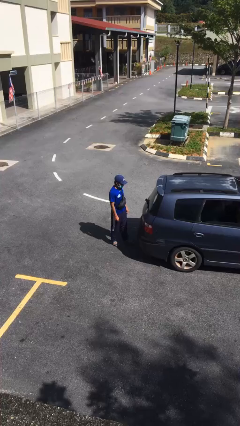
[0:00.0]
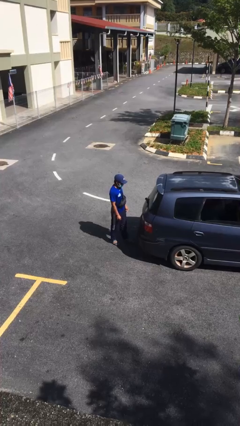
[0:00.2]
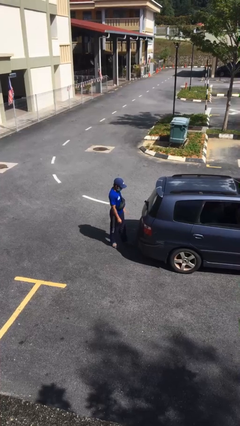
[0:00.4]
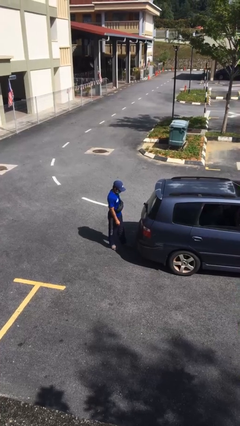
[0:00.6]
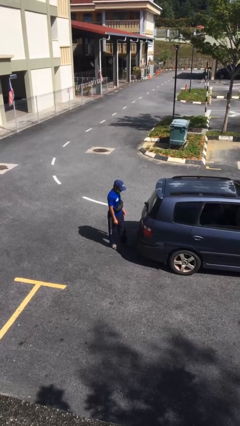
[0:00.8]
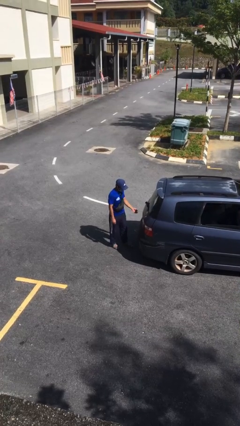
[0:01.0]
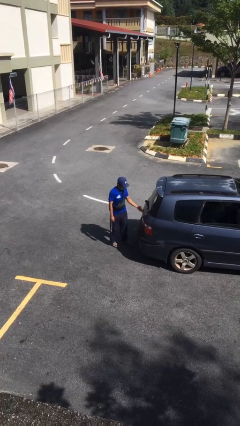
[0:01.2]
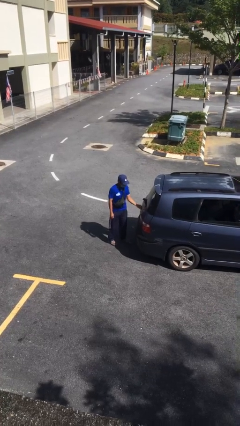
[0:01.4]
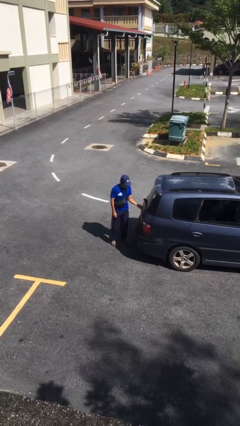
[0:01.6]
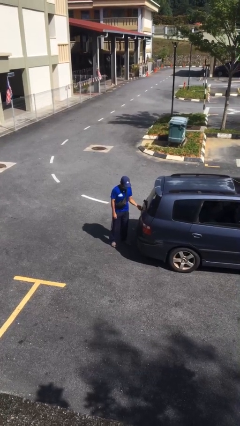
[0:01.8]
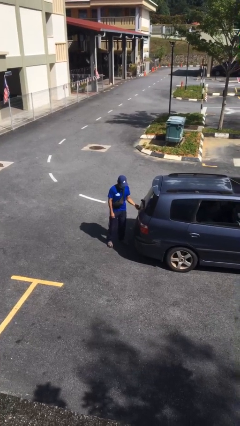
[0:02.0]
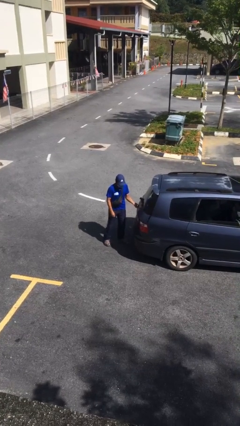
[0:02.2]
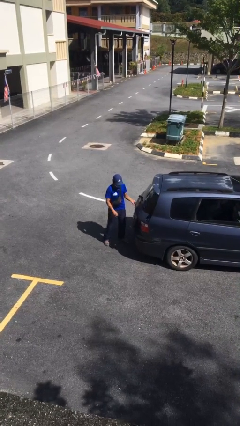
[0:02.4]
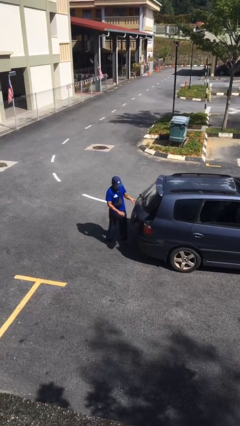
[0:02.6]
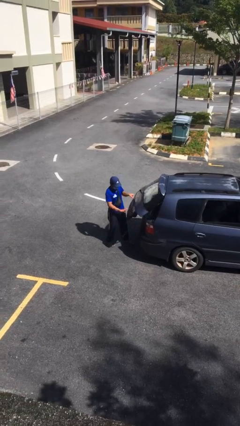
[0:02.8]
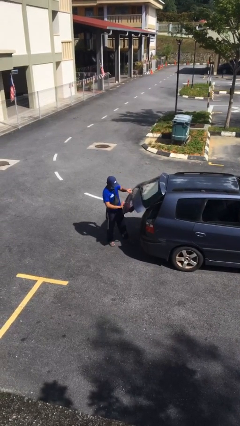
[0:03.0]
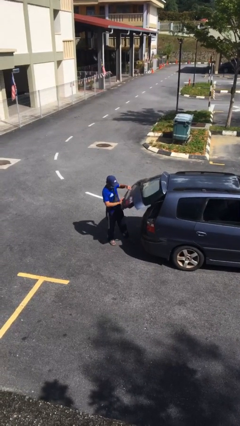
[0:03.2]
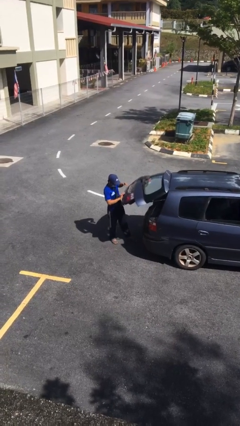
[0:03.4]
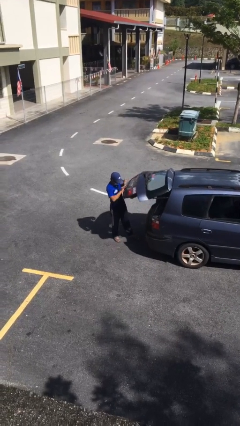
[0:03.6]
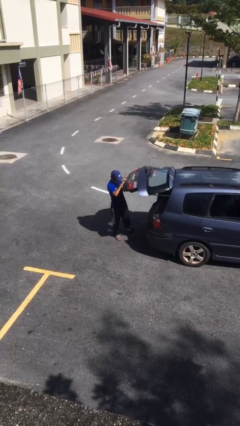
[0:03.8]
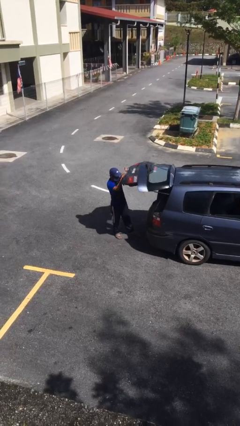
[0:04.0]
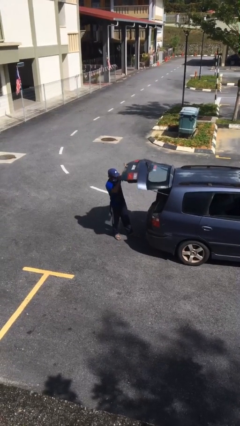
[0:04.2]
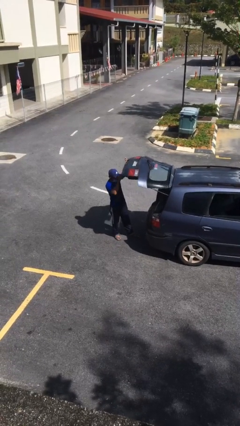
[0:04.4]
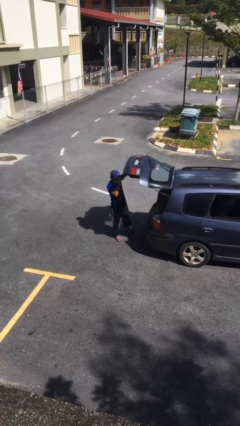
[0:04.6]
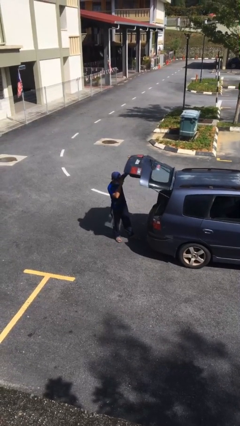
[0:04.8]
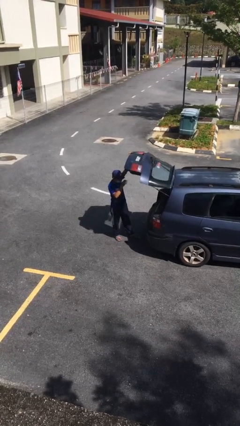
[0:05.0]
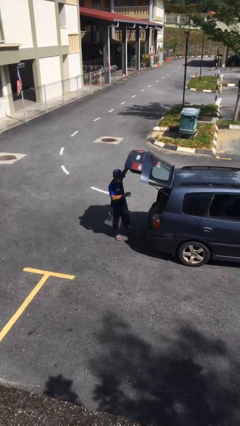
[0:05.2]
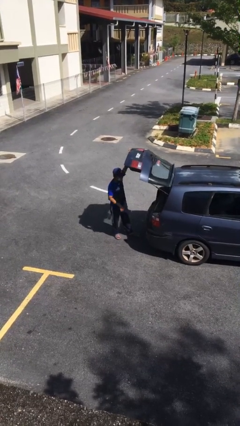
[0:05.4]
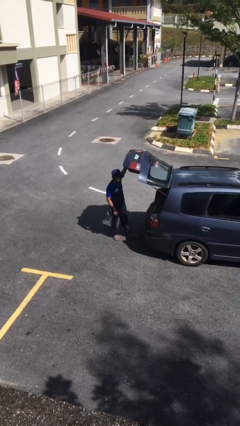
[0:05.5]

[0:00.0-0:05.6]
person opens car trunk

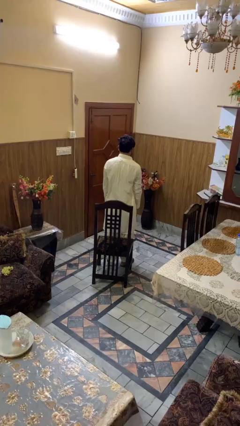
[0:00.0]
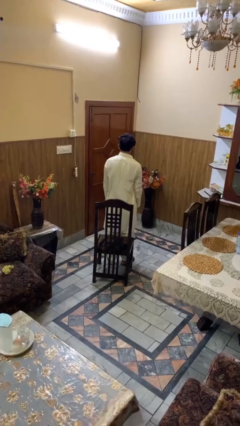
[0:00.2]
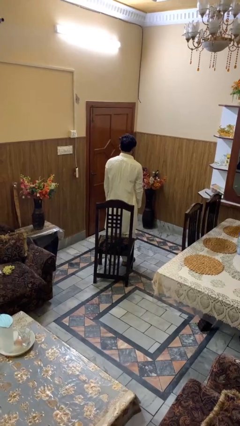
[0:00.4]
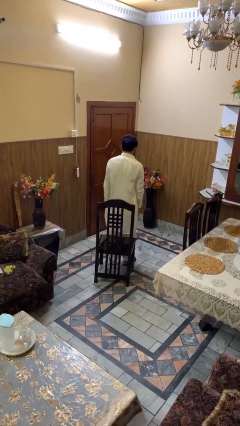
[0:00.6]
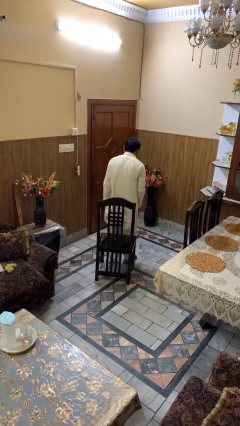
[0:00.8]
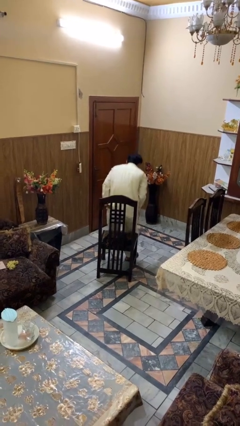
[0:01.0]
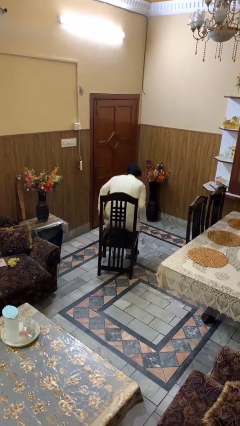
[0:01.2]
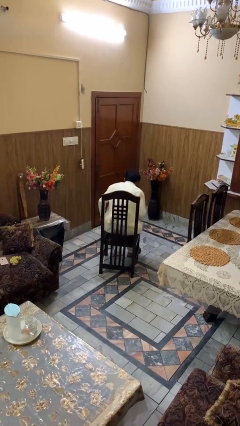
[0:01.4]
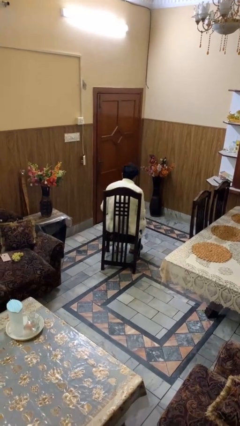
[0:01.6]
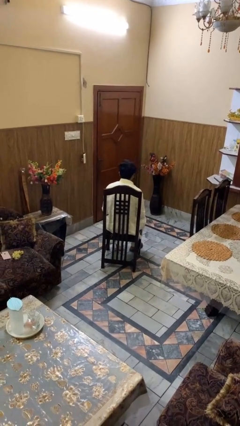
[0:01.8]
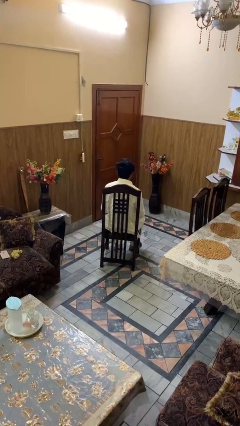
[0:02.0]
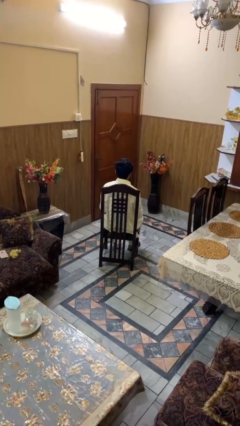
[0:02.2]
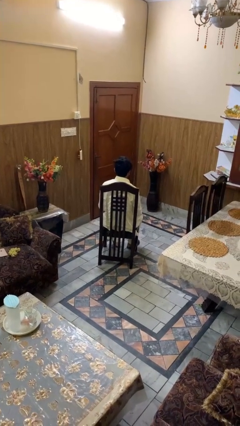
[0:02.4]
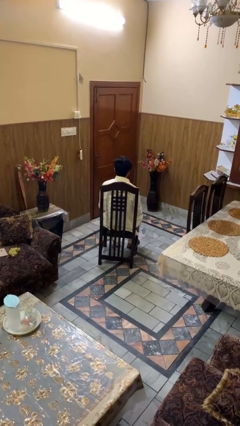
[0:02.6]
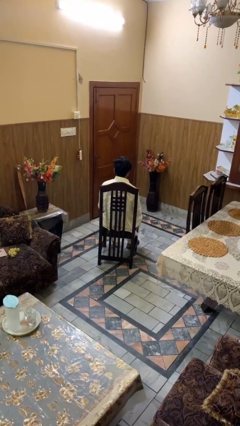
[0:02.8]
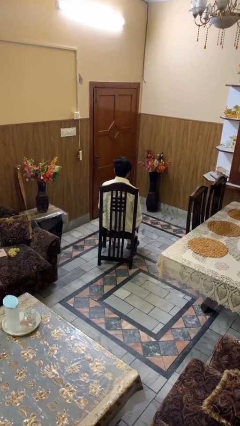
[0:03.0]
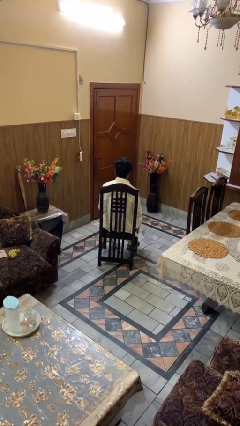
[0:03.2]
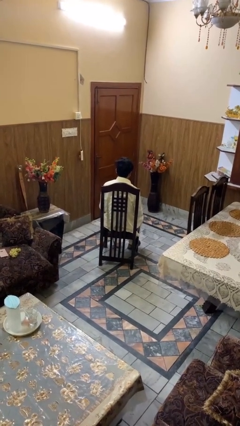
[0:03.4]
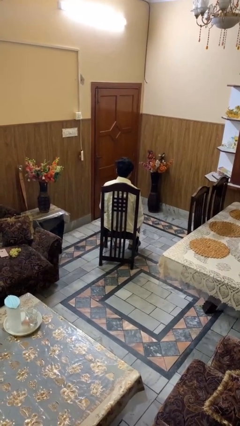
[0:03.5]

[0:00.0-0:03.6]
person sits down

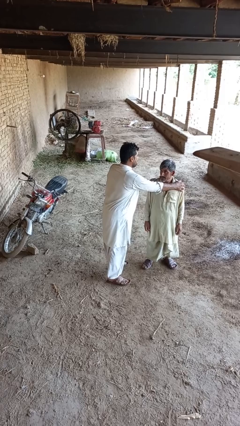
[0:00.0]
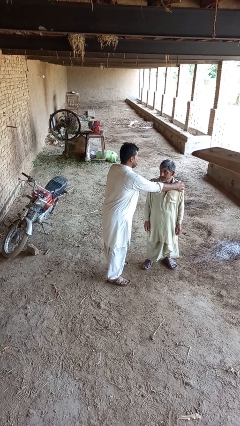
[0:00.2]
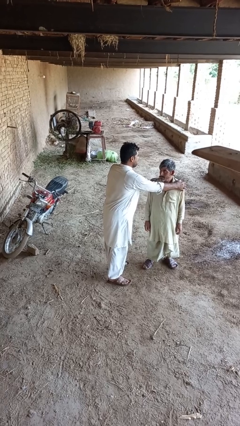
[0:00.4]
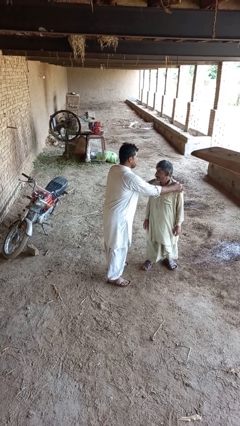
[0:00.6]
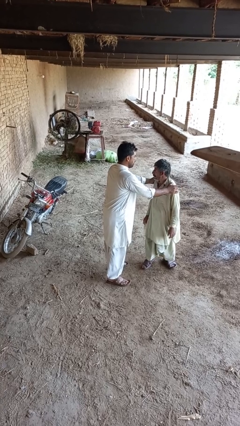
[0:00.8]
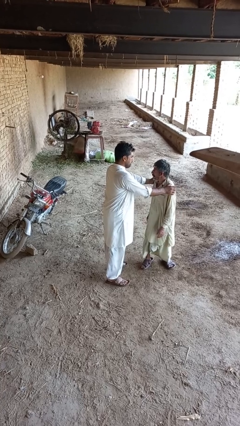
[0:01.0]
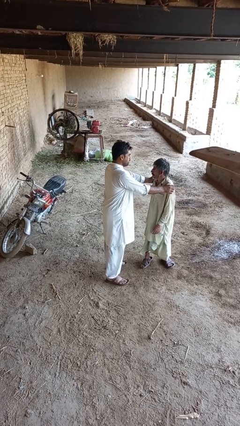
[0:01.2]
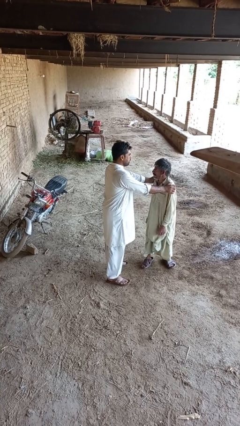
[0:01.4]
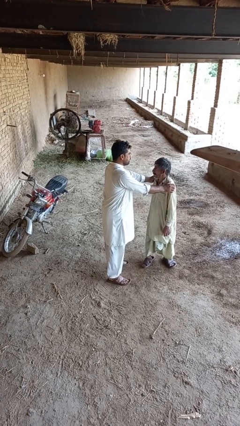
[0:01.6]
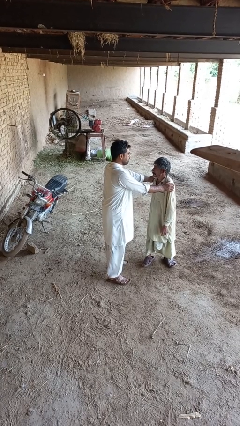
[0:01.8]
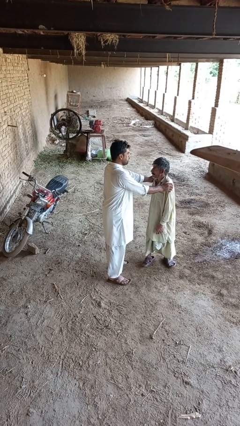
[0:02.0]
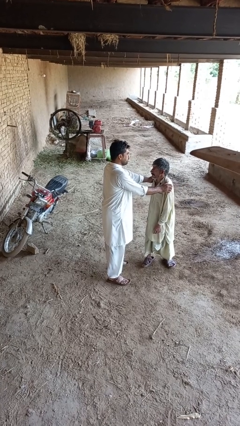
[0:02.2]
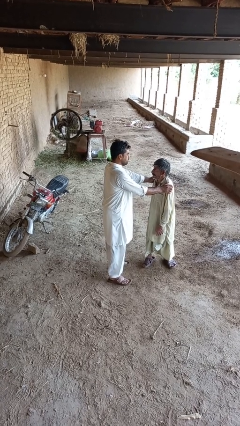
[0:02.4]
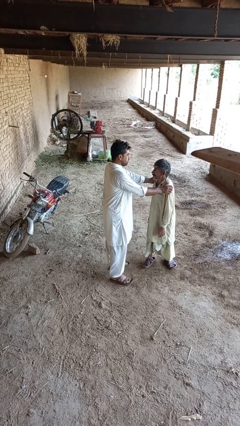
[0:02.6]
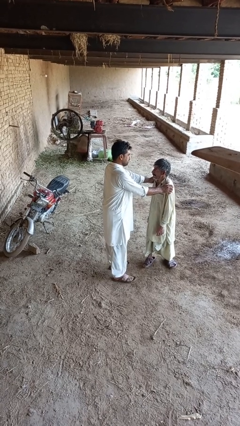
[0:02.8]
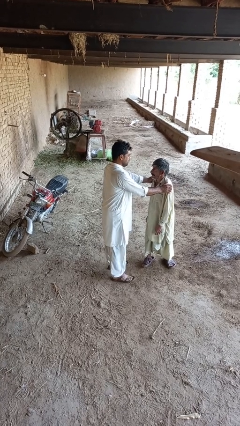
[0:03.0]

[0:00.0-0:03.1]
person spins person around

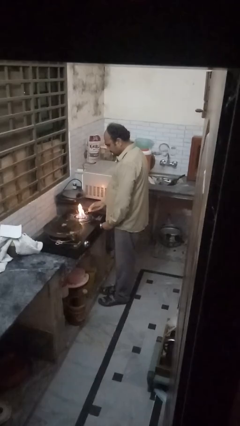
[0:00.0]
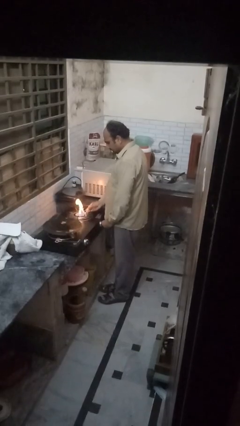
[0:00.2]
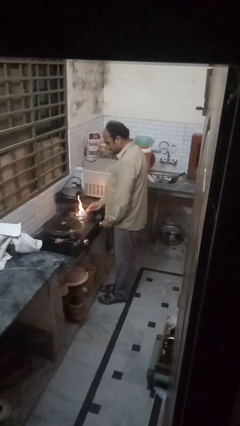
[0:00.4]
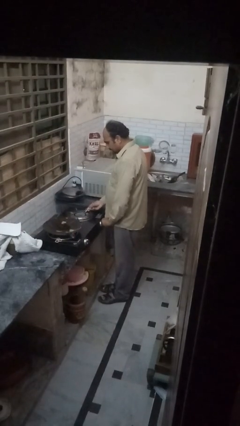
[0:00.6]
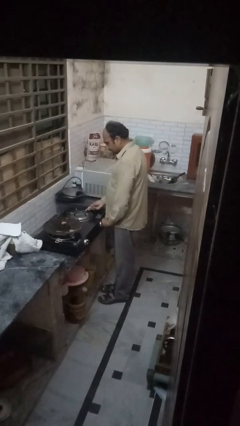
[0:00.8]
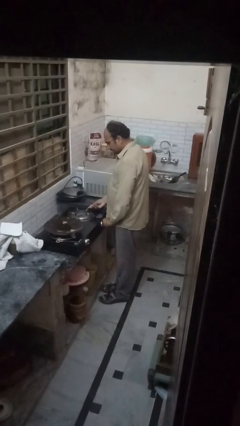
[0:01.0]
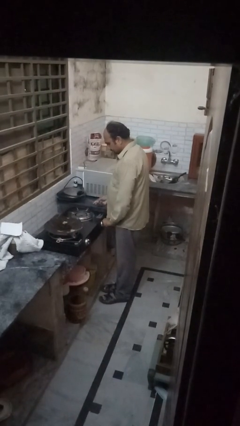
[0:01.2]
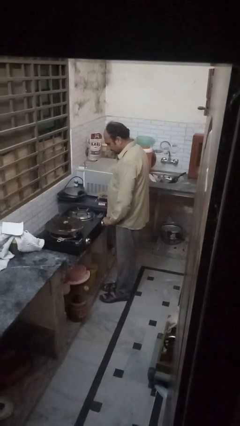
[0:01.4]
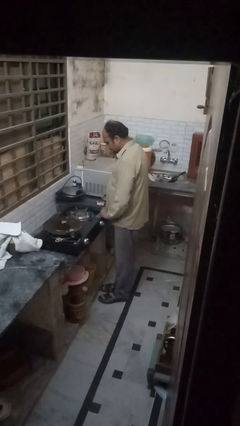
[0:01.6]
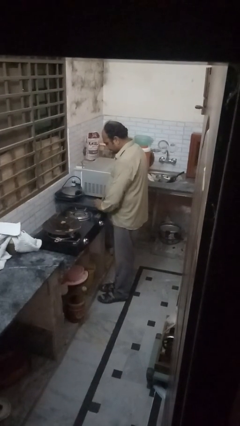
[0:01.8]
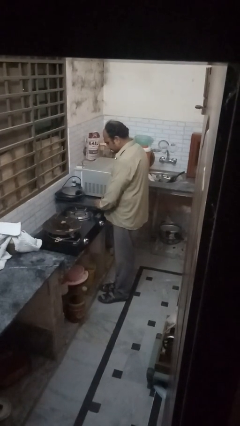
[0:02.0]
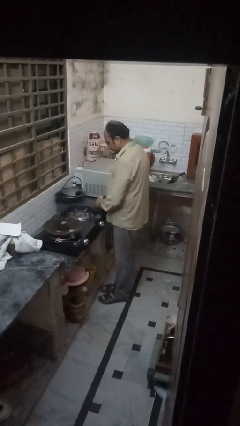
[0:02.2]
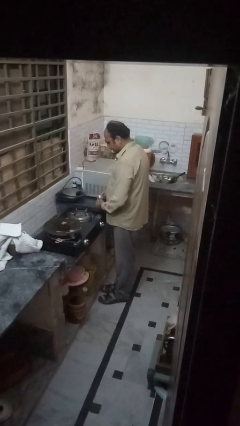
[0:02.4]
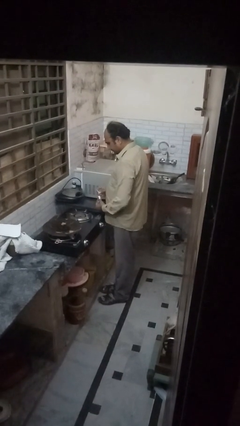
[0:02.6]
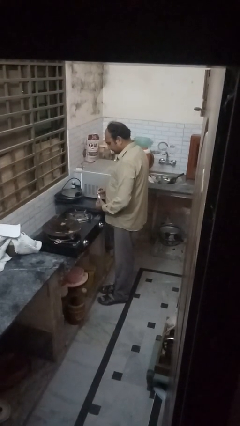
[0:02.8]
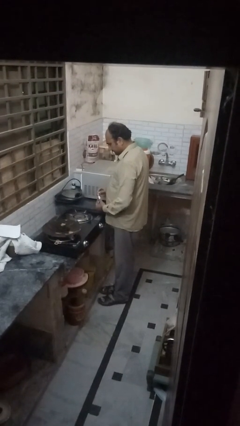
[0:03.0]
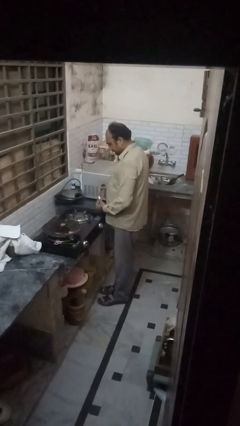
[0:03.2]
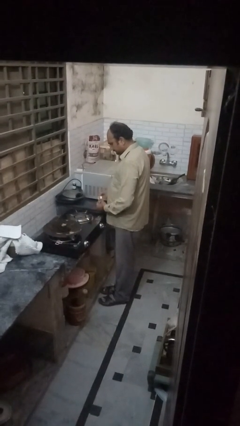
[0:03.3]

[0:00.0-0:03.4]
person turns off stovetop

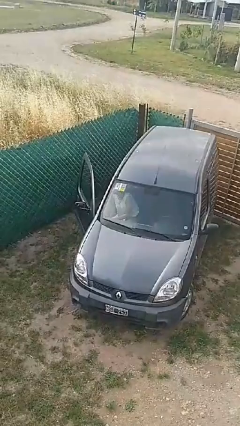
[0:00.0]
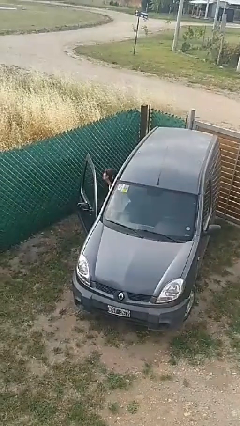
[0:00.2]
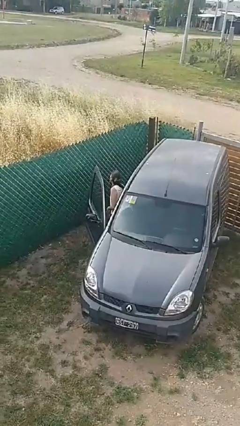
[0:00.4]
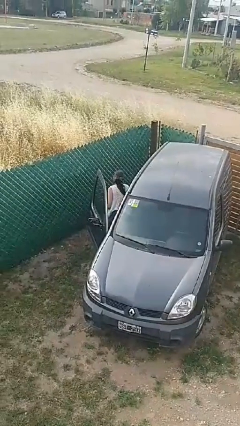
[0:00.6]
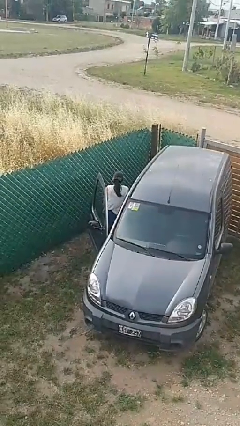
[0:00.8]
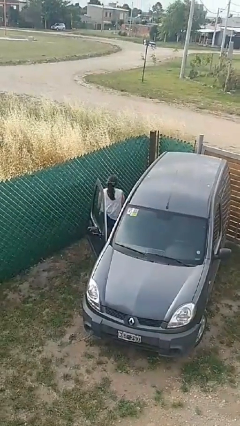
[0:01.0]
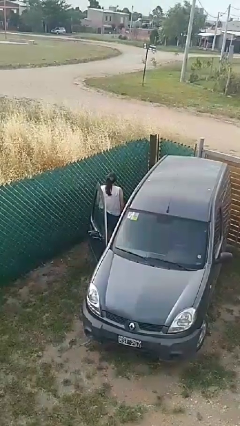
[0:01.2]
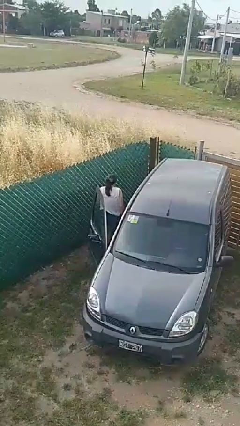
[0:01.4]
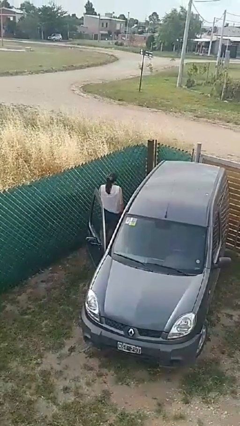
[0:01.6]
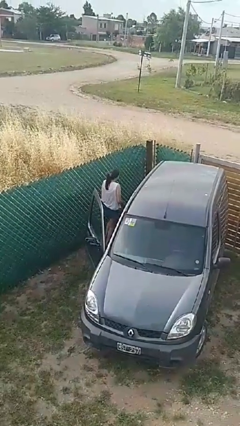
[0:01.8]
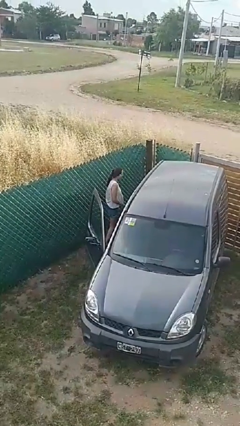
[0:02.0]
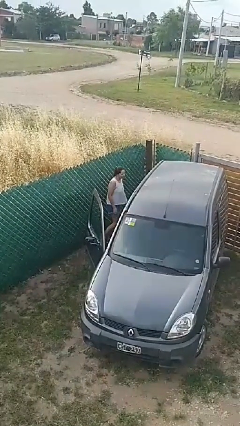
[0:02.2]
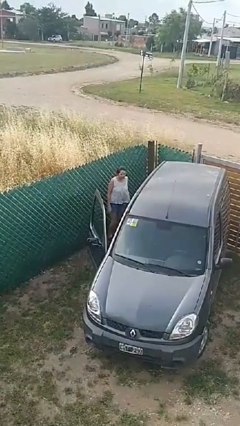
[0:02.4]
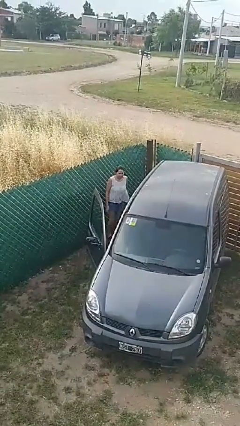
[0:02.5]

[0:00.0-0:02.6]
person exits car
